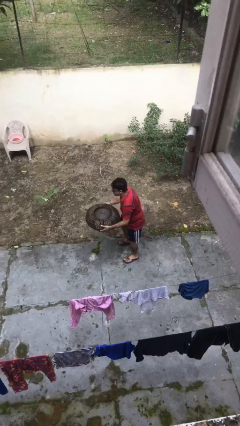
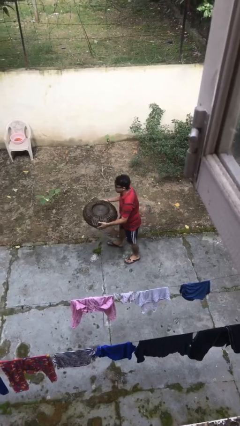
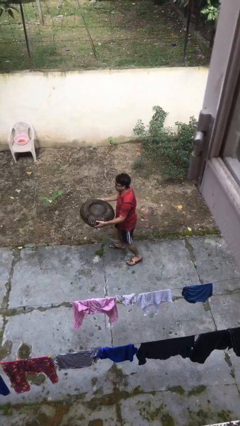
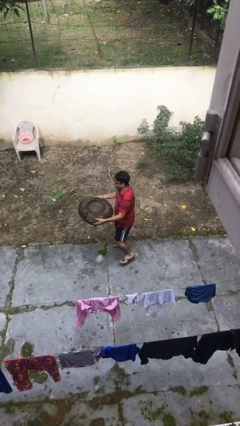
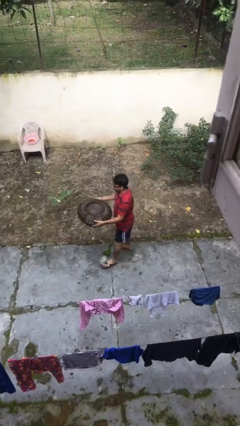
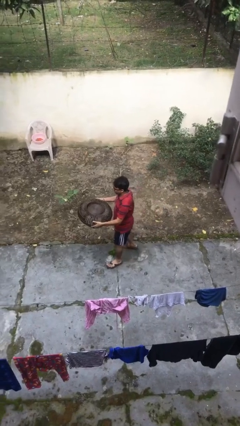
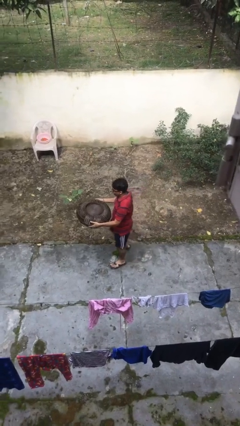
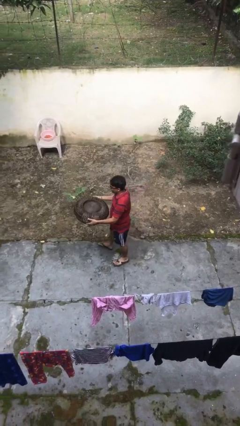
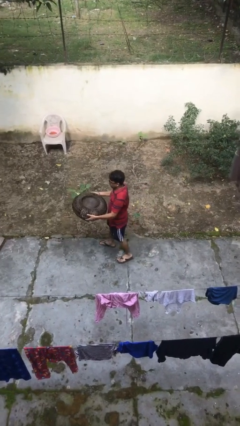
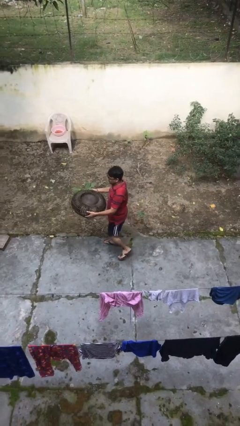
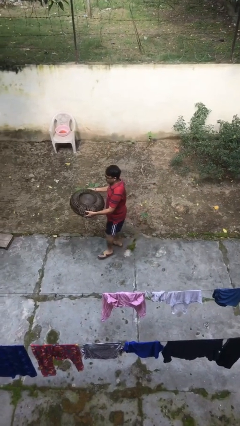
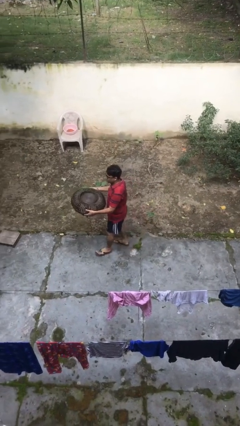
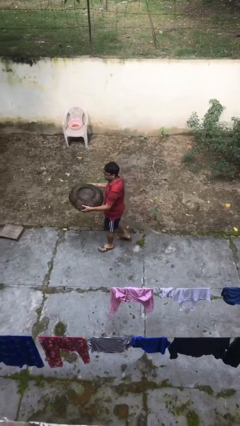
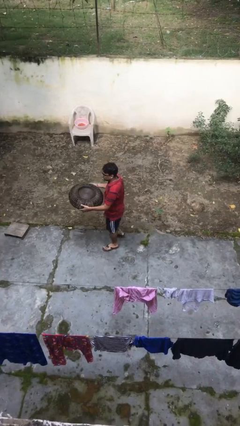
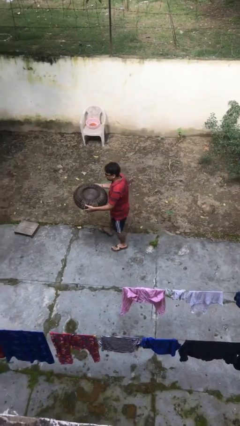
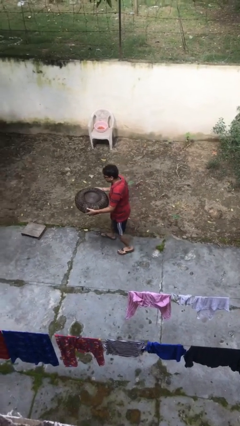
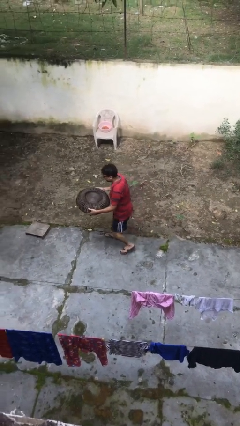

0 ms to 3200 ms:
person carries heavy object

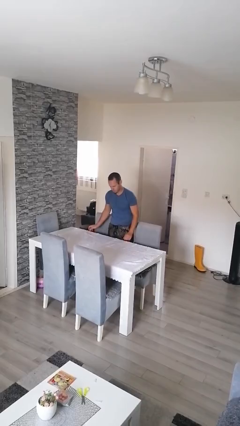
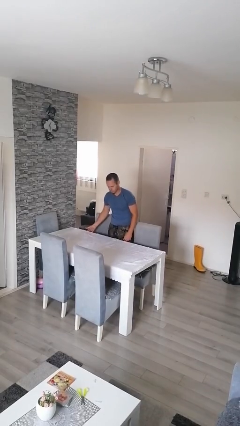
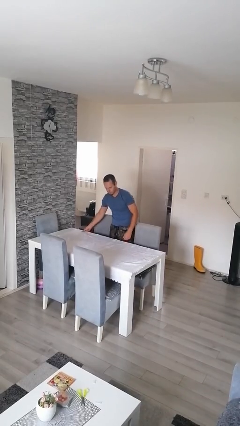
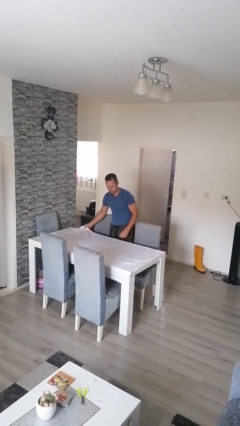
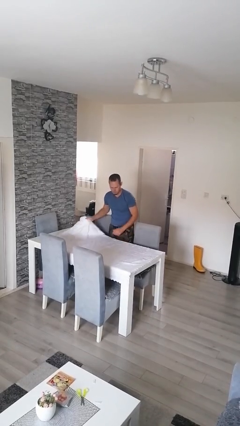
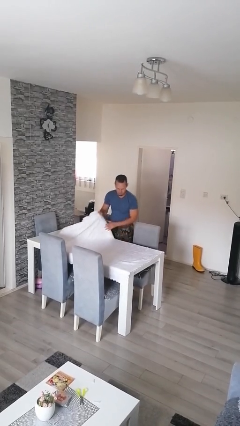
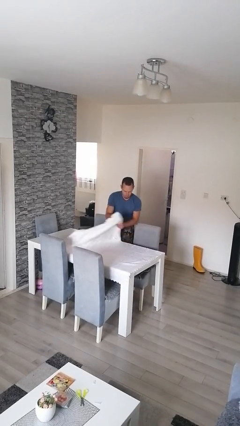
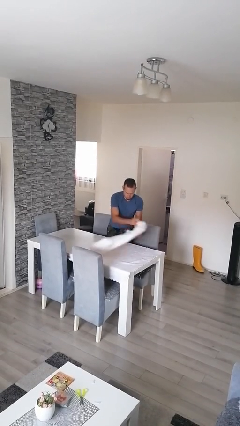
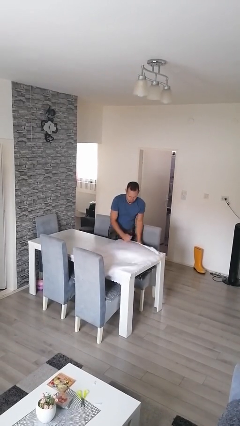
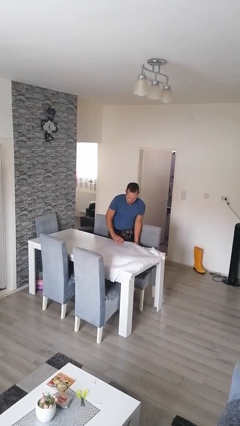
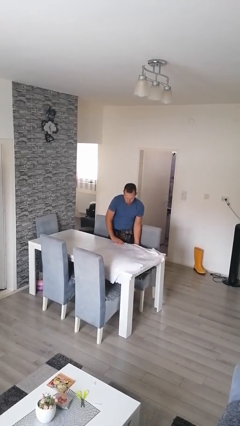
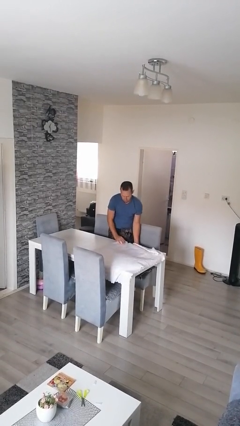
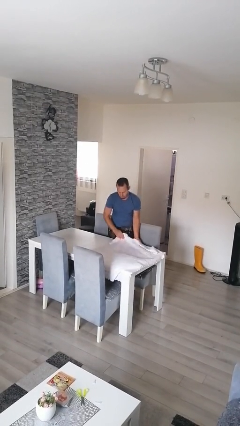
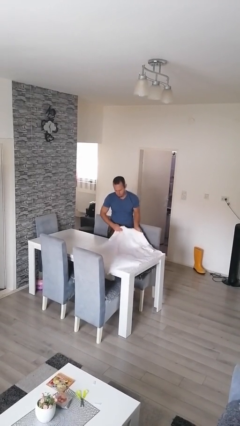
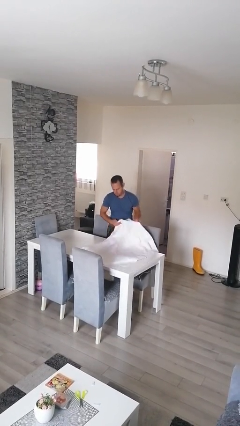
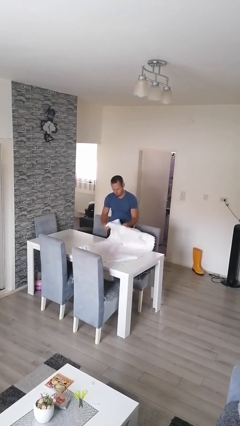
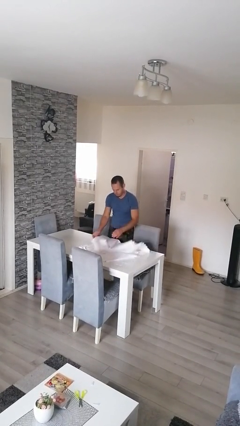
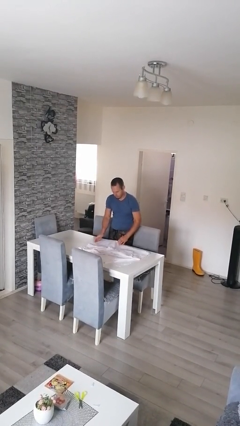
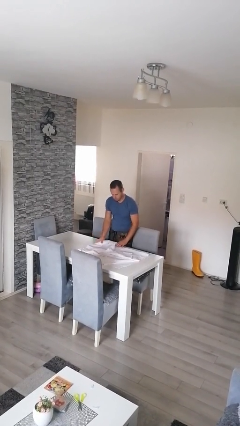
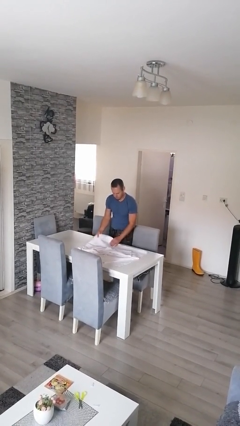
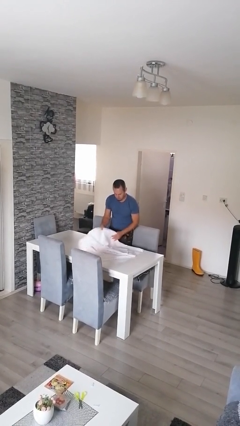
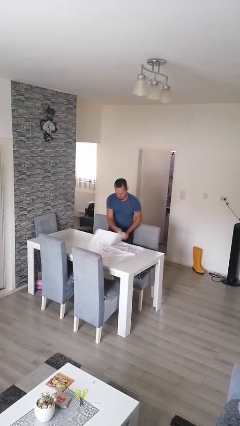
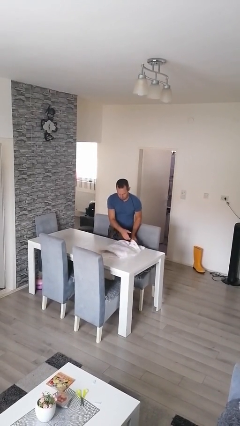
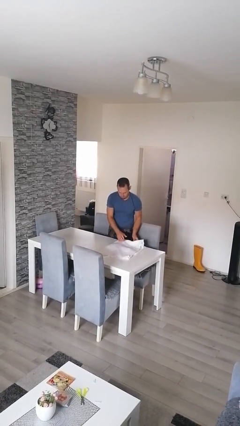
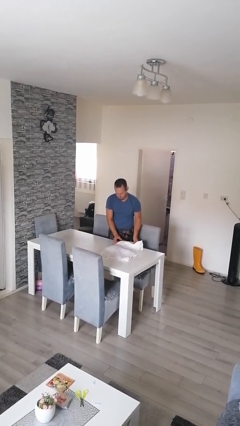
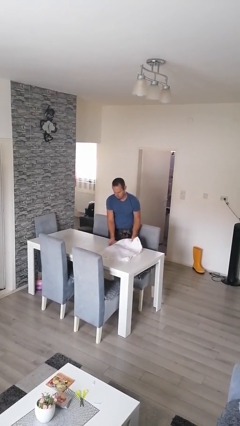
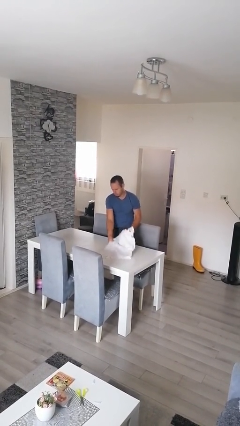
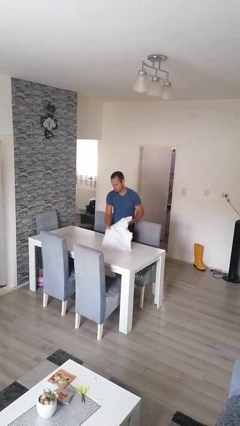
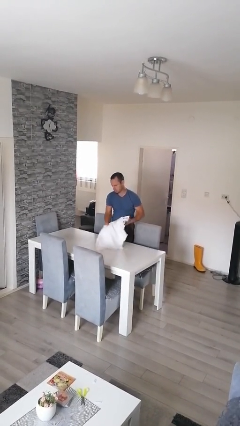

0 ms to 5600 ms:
person folds tablecloth

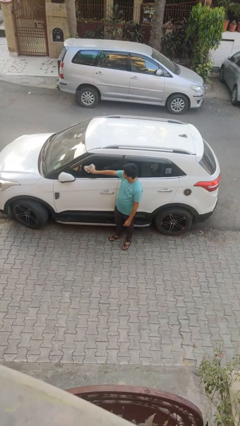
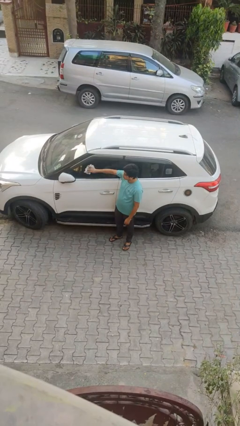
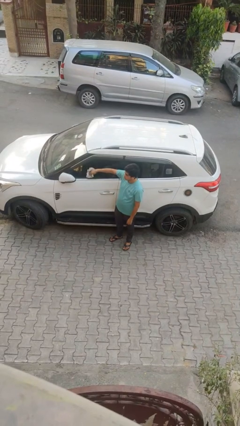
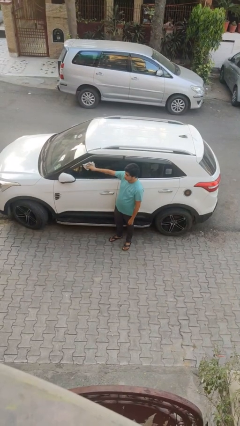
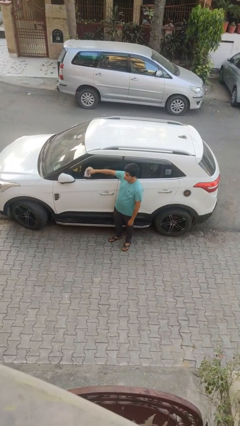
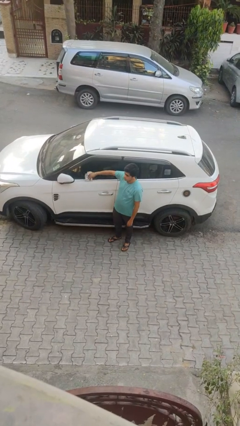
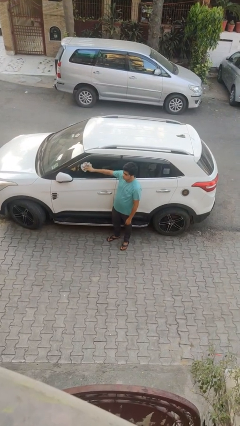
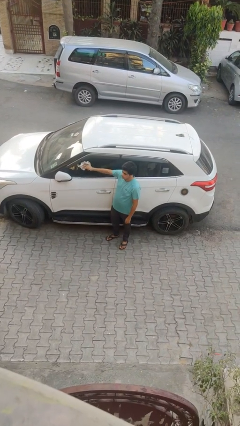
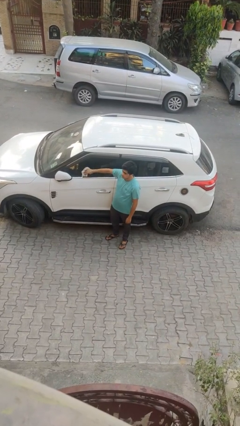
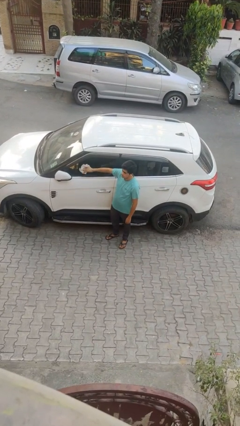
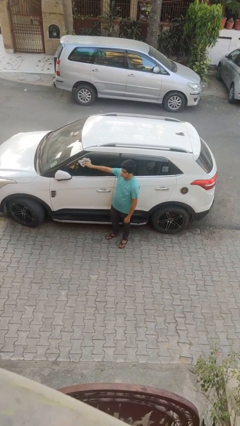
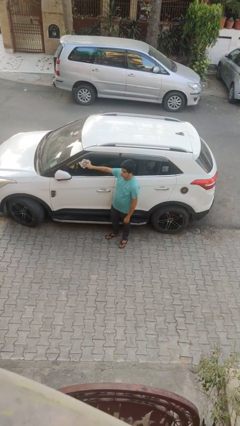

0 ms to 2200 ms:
person polishes car with rag

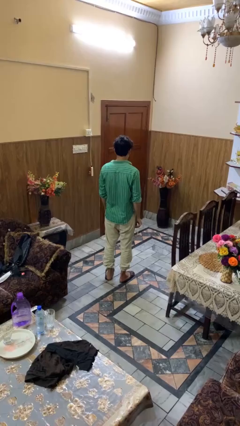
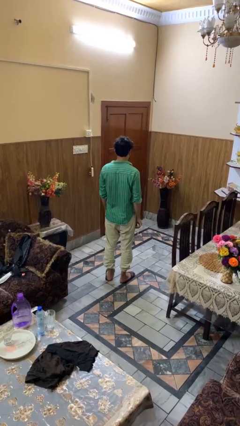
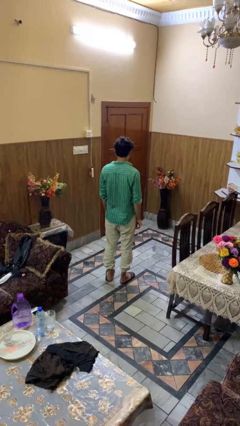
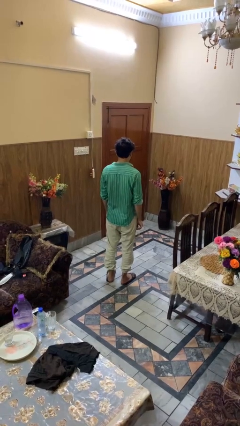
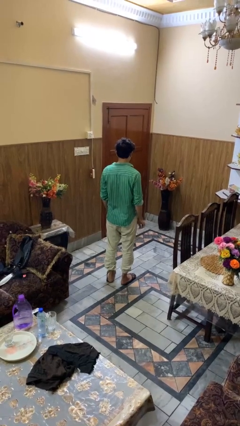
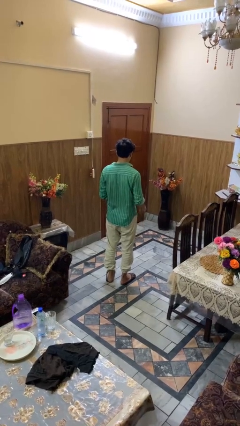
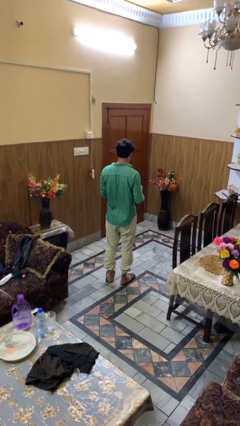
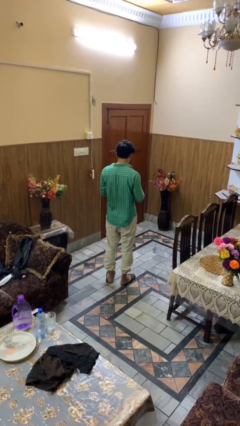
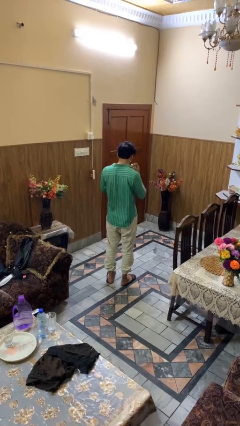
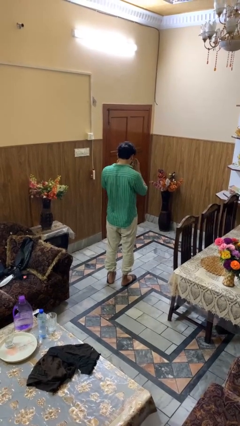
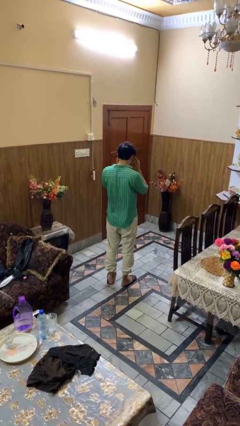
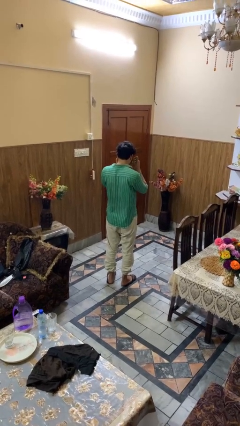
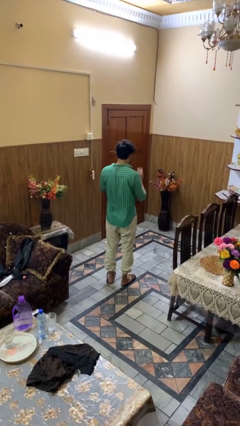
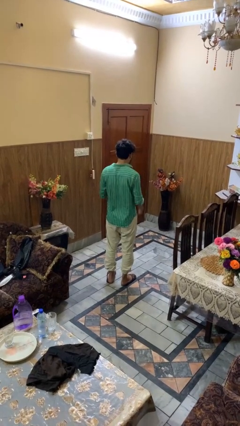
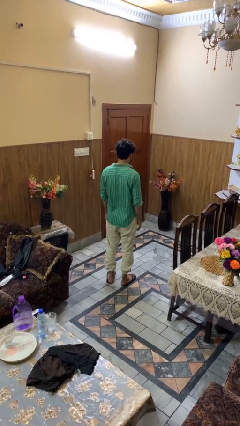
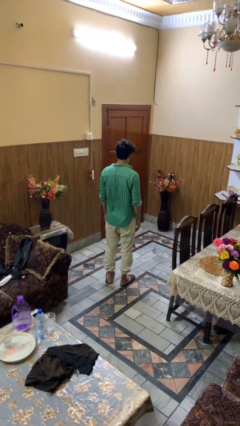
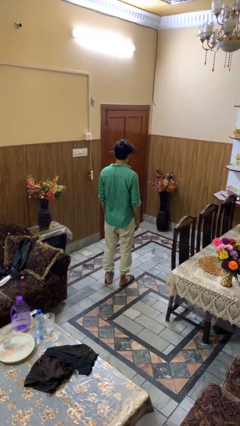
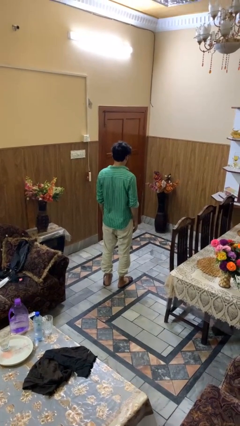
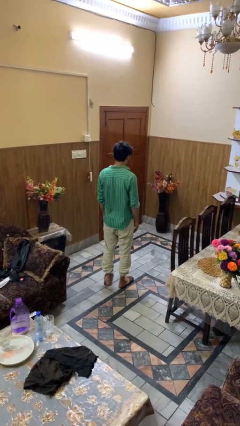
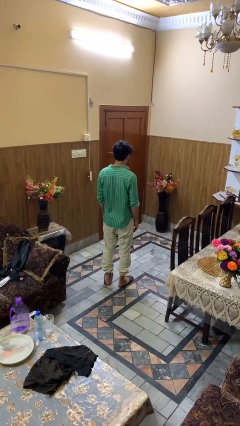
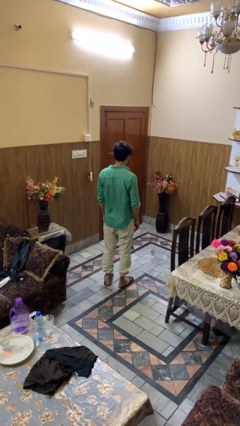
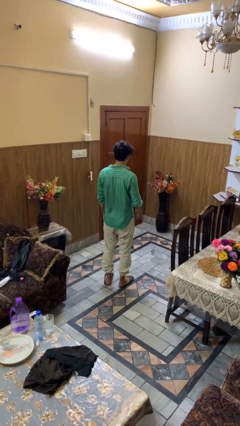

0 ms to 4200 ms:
person puts on glasses

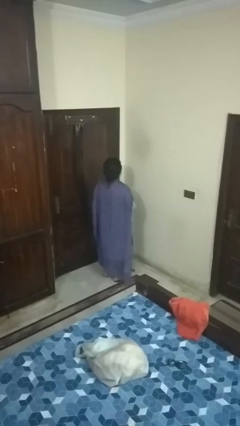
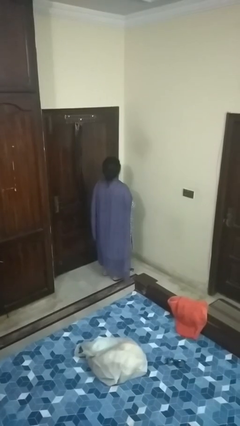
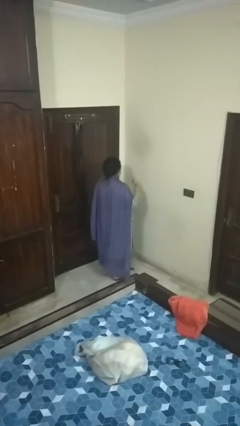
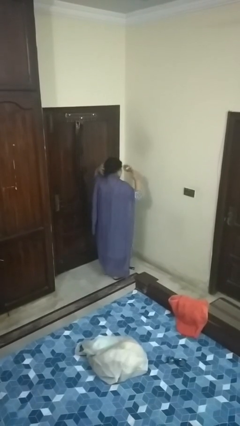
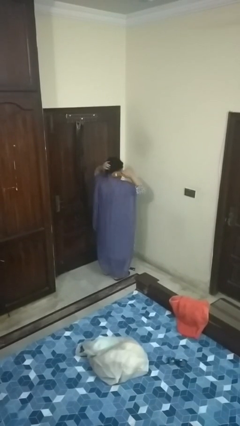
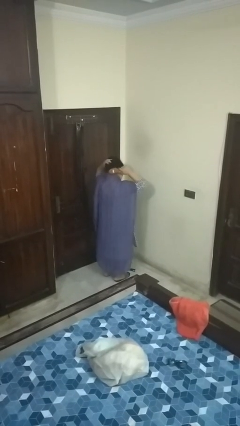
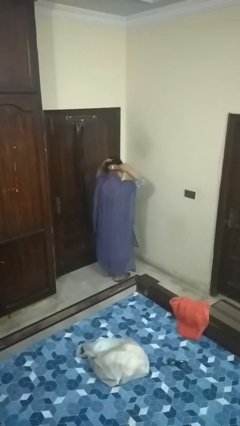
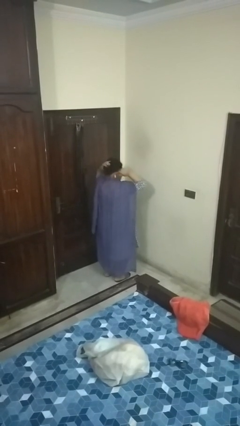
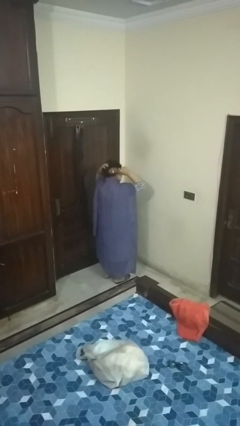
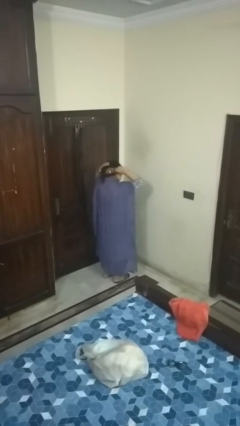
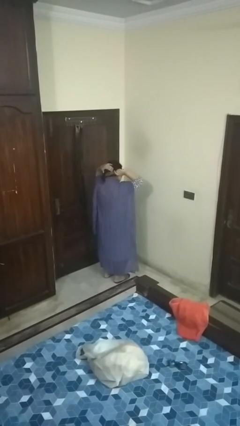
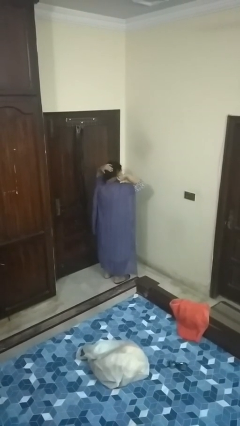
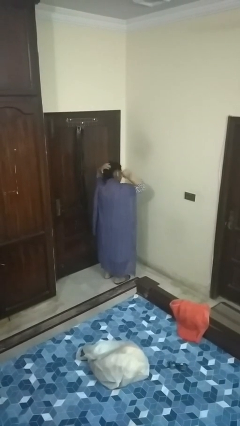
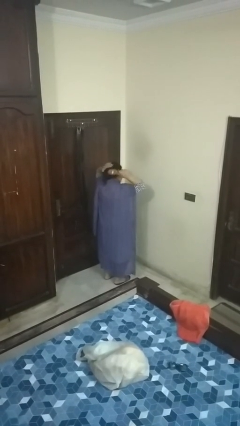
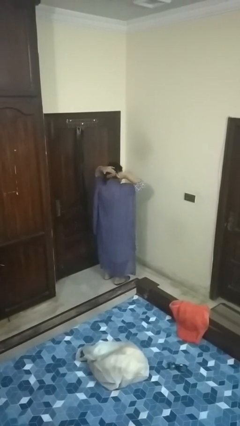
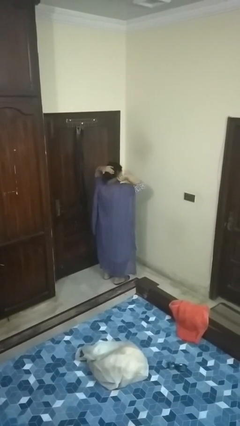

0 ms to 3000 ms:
person brushes hair
